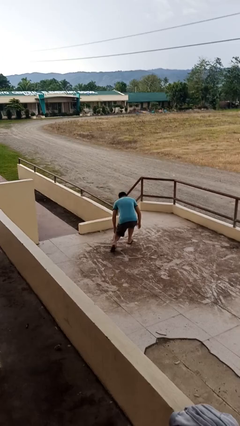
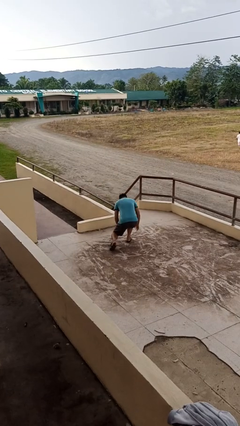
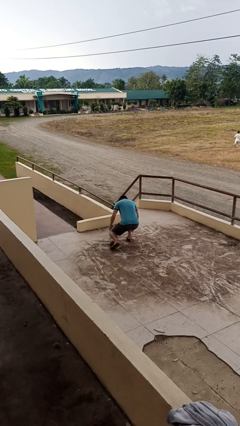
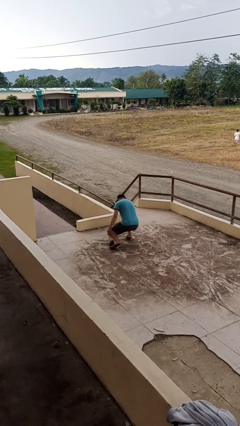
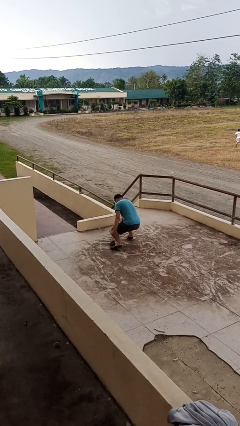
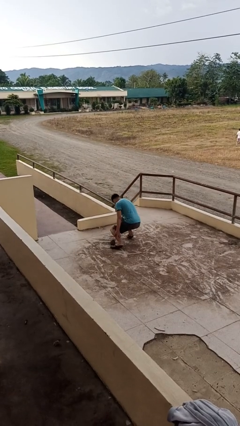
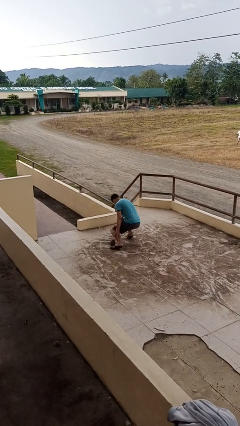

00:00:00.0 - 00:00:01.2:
person lies down on floor

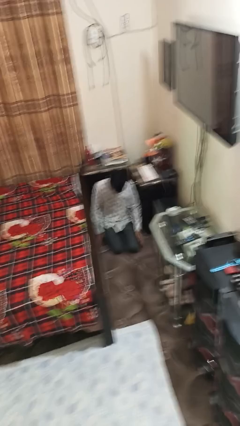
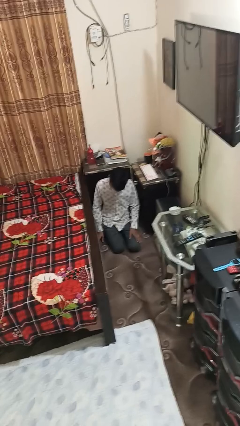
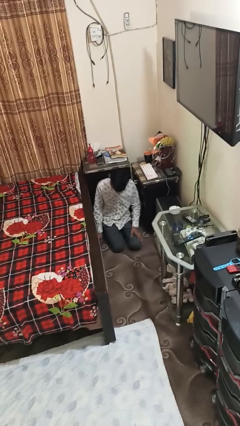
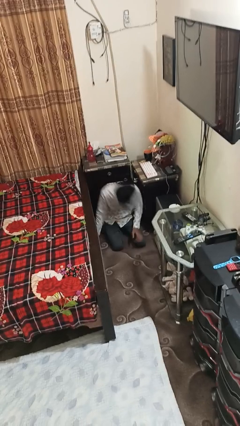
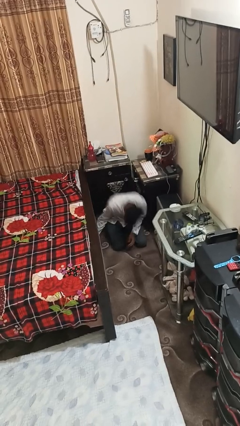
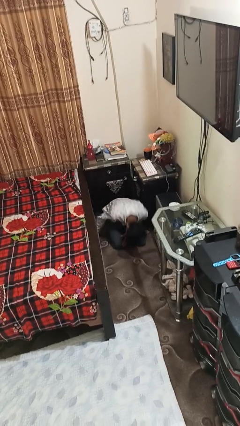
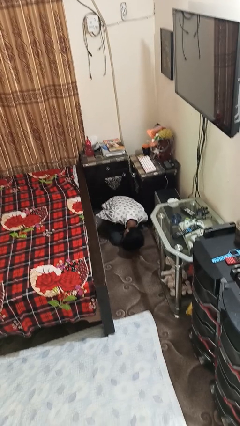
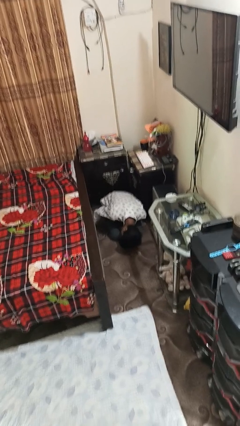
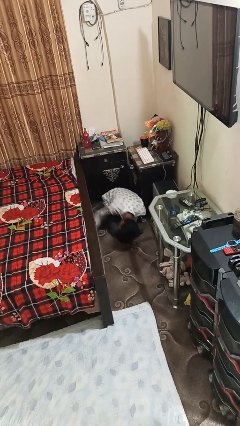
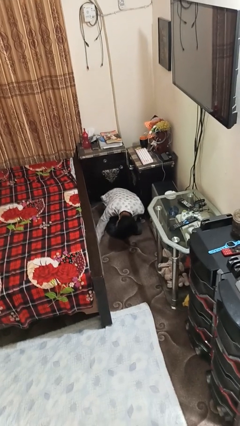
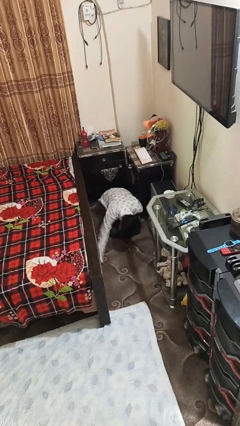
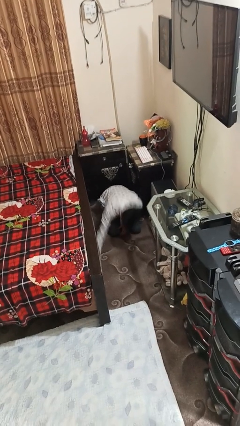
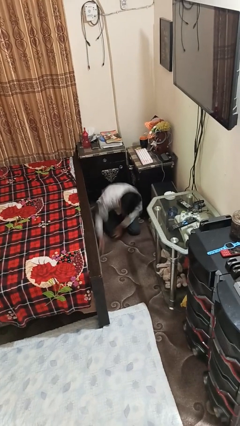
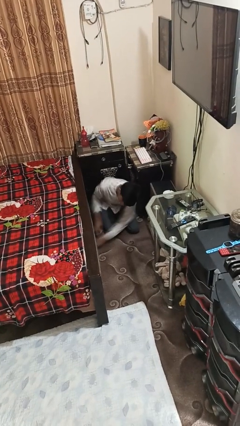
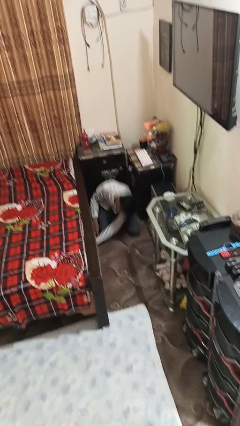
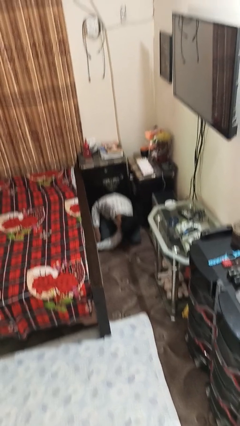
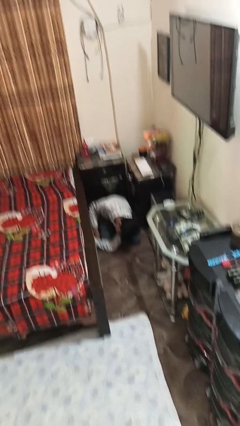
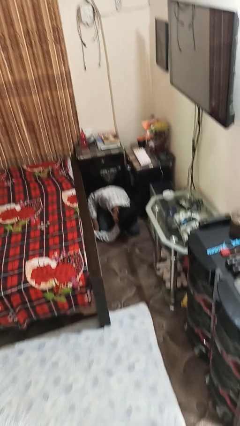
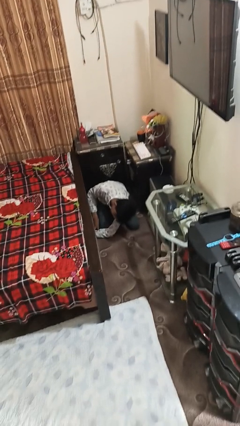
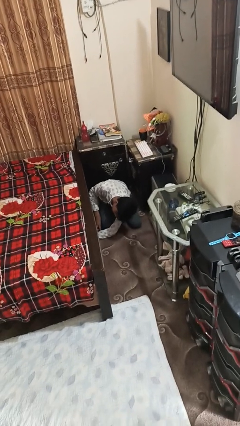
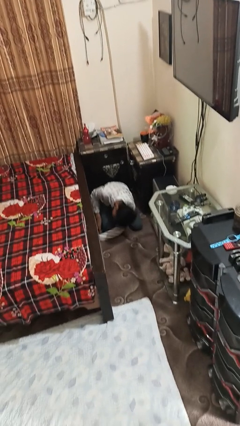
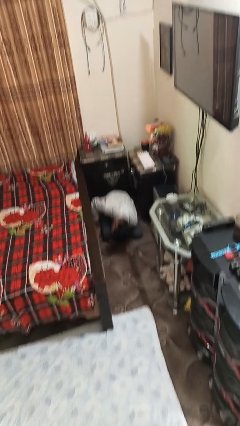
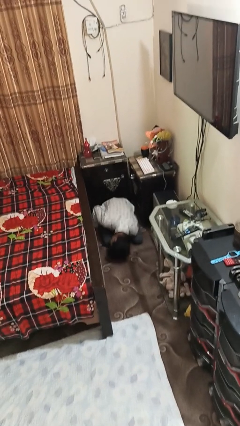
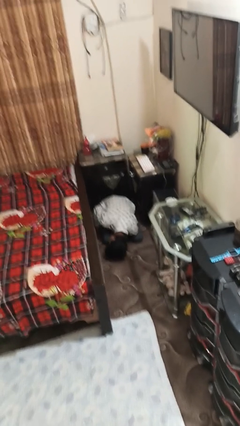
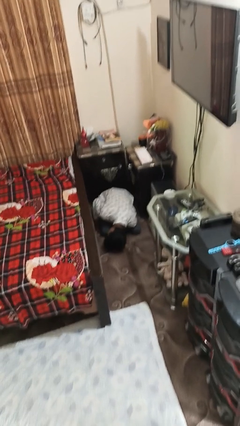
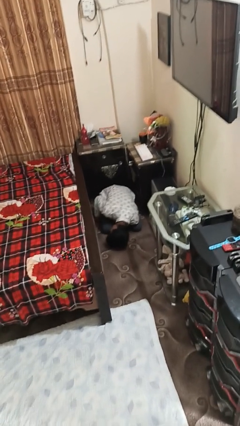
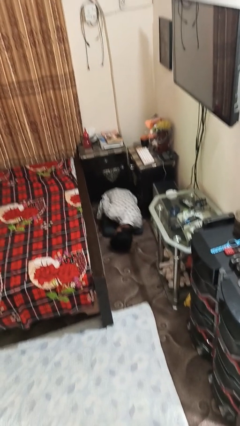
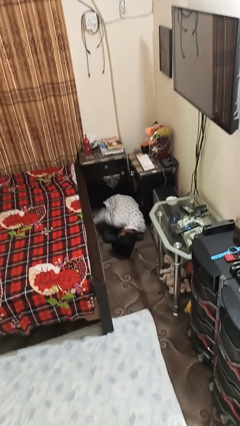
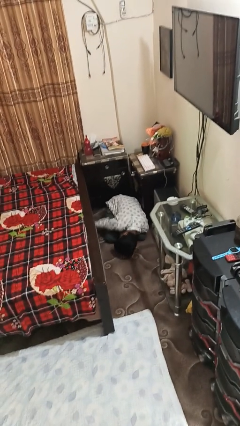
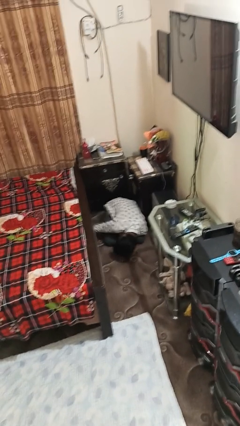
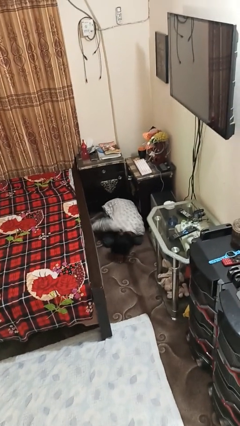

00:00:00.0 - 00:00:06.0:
person searches under bed

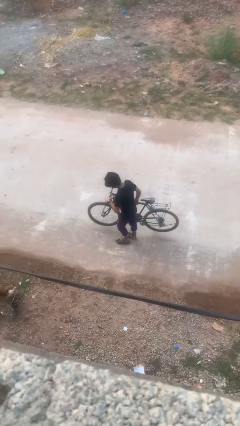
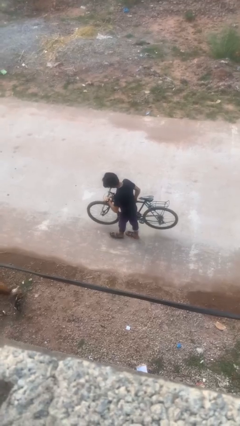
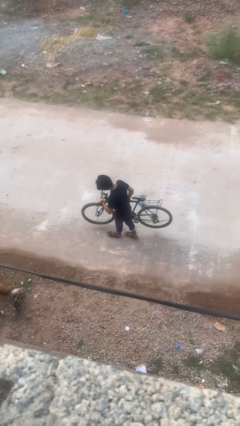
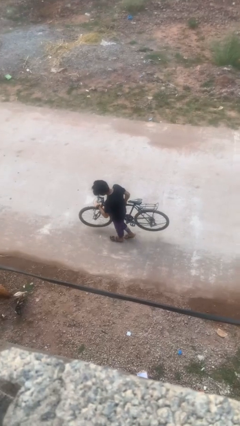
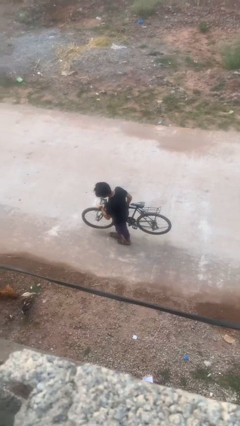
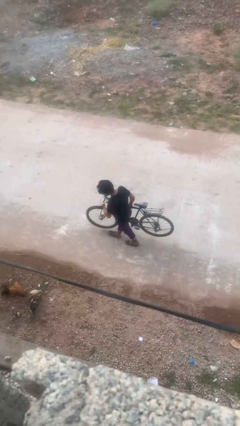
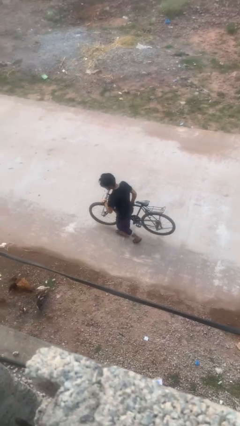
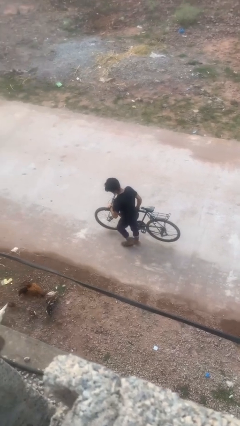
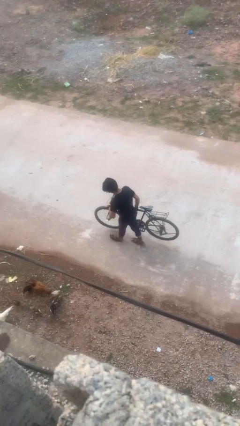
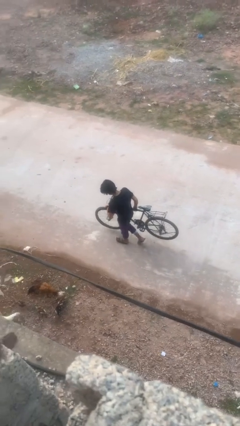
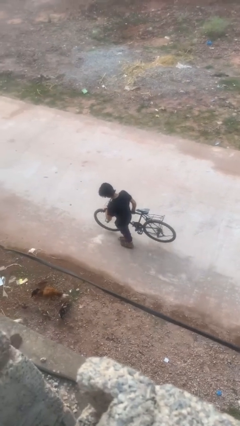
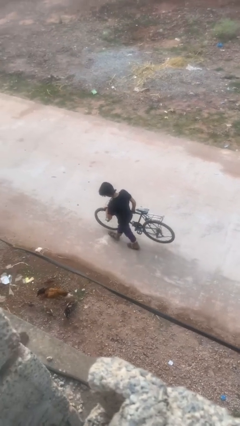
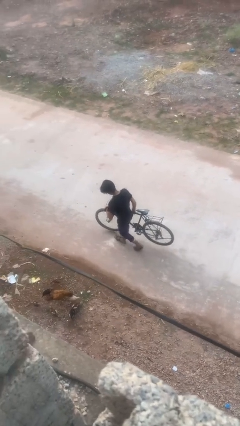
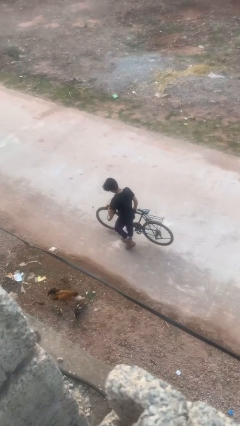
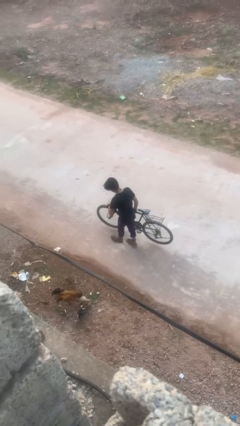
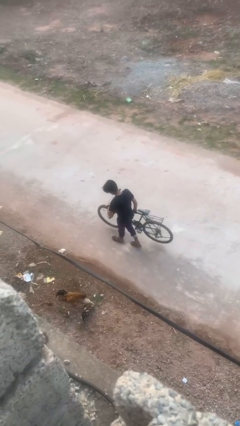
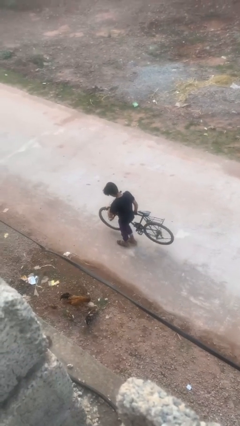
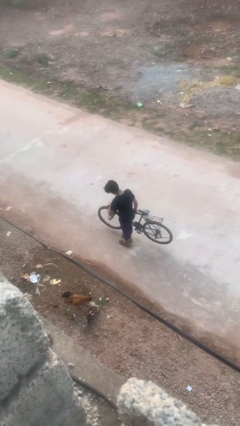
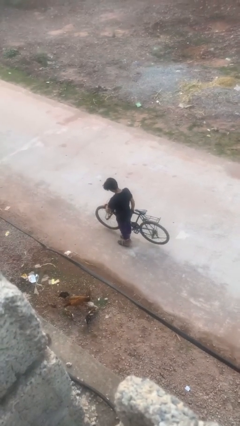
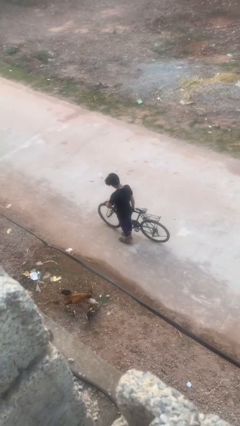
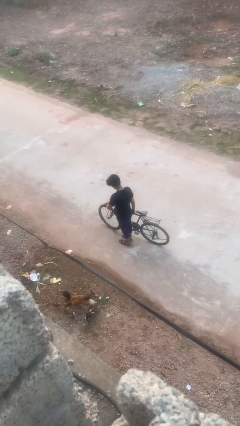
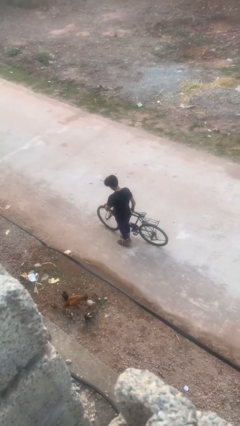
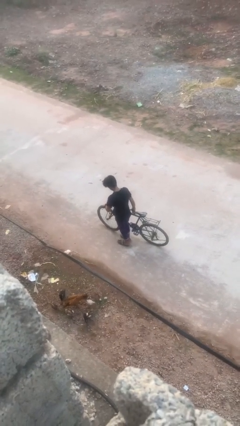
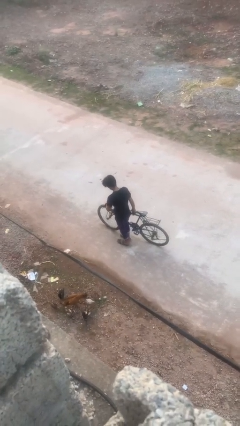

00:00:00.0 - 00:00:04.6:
person carries bicycle

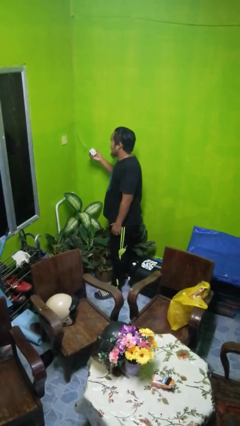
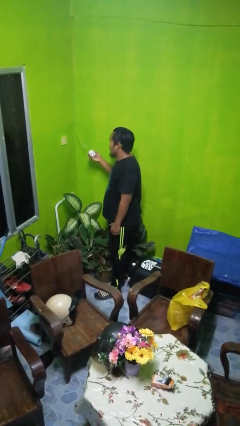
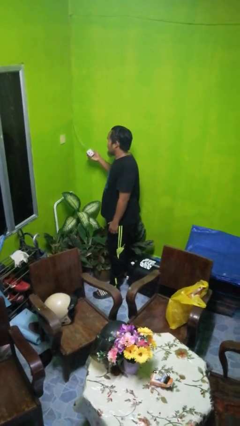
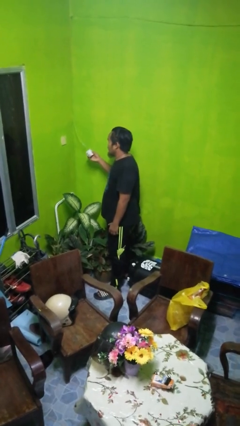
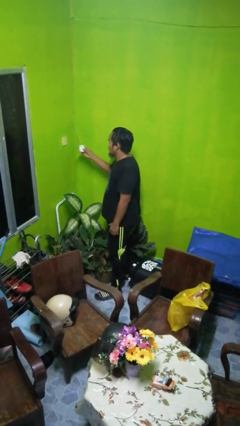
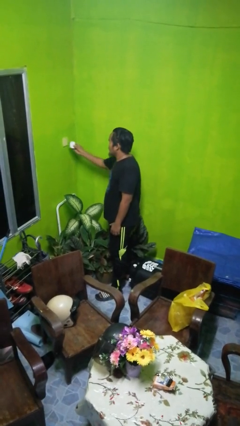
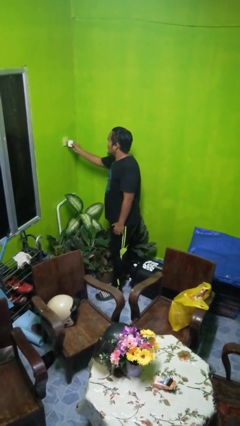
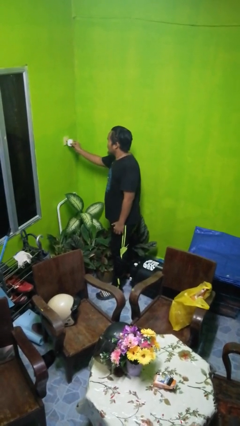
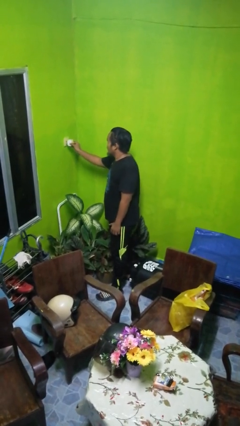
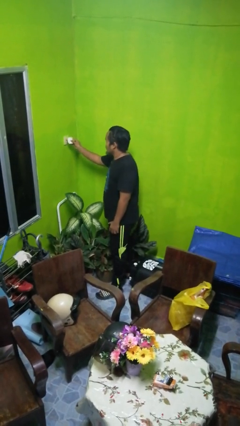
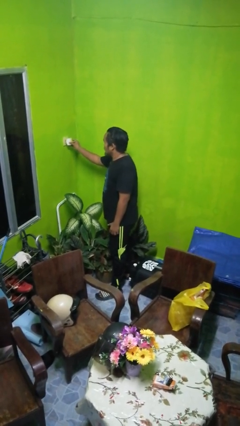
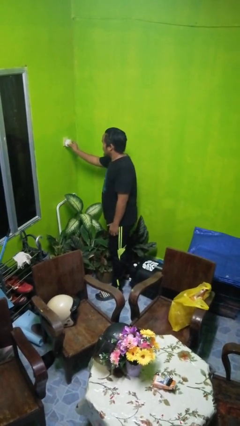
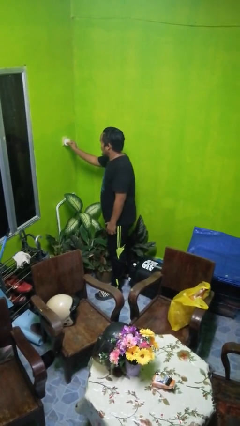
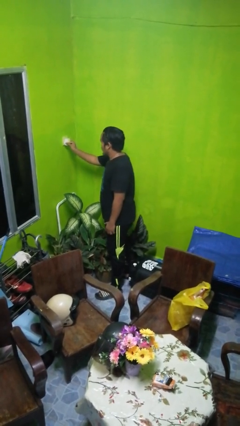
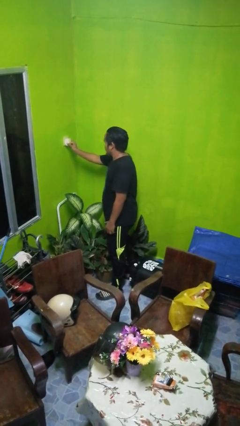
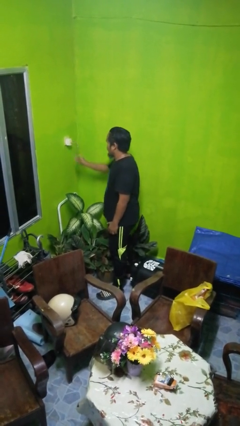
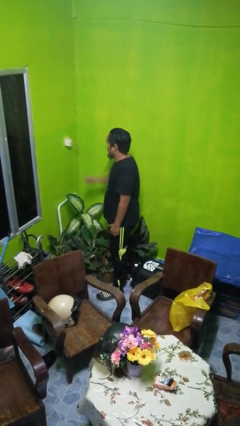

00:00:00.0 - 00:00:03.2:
person plugs into electrical socket

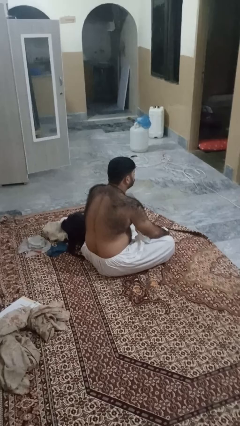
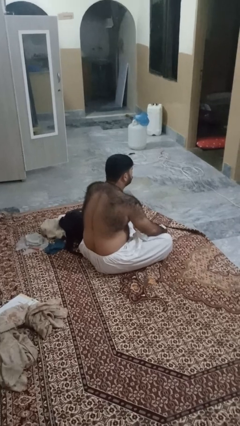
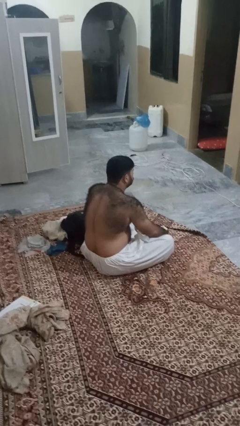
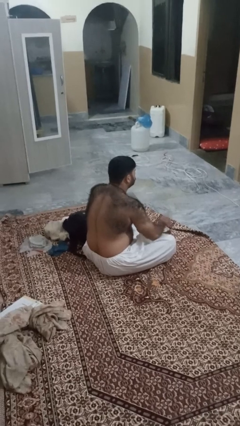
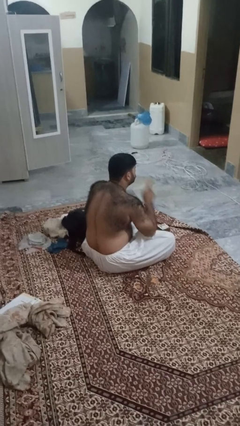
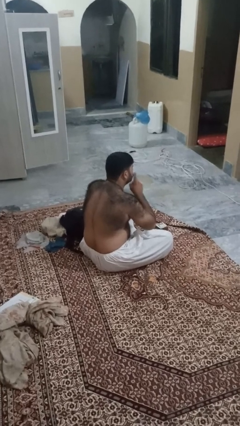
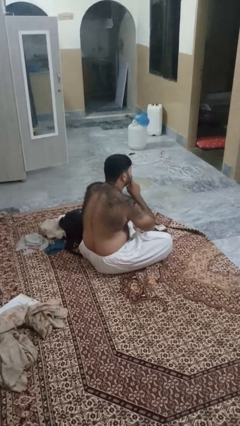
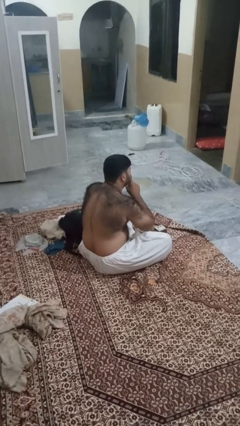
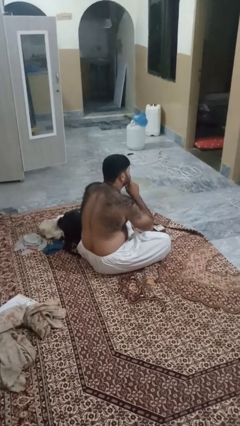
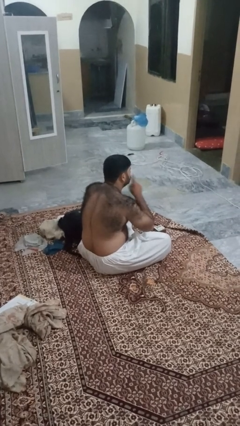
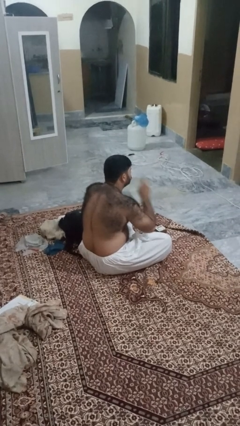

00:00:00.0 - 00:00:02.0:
person gestures be quiet

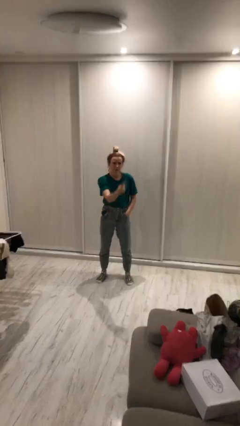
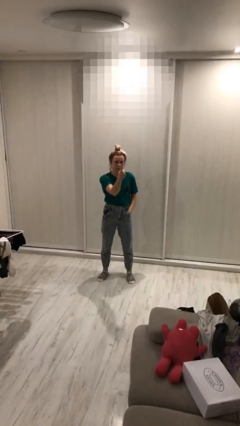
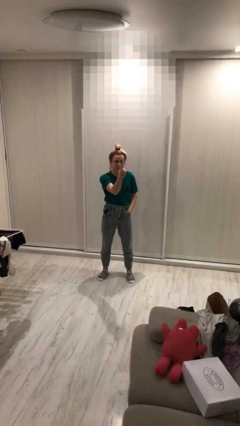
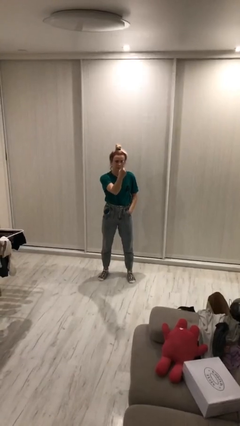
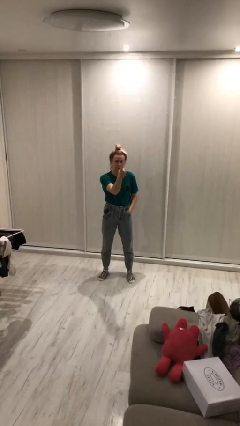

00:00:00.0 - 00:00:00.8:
person gestures number one
